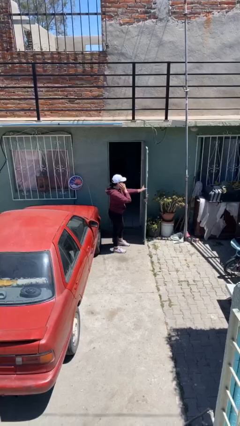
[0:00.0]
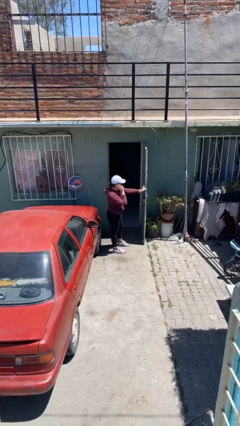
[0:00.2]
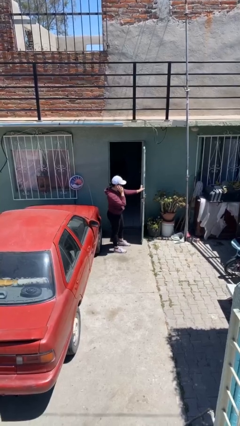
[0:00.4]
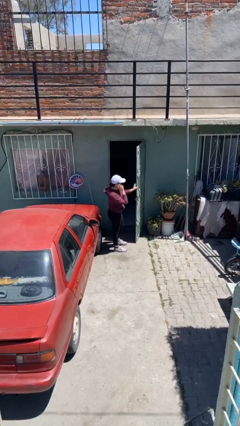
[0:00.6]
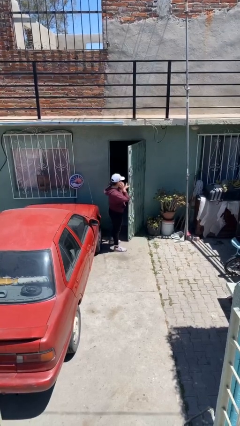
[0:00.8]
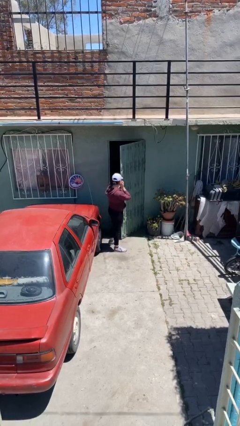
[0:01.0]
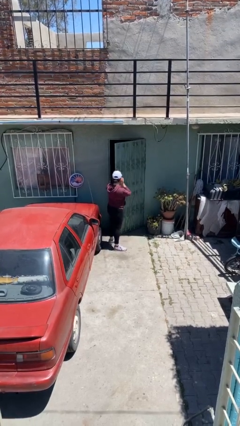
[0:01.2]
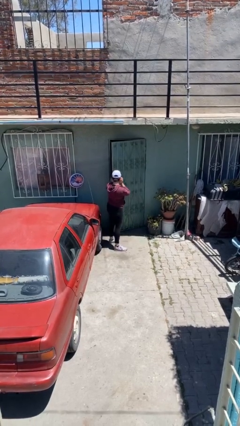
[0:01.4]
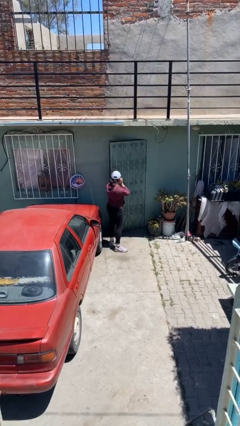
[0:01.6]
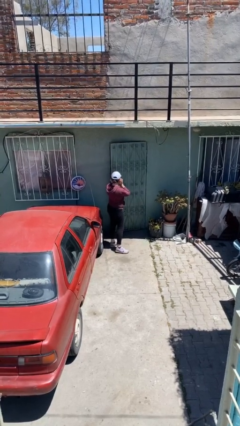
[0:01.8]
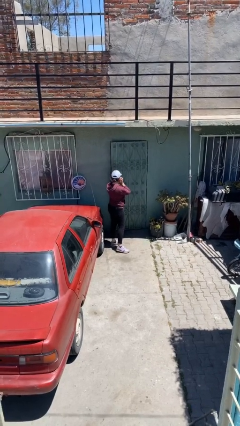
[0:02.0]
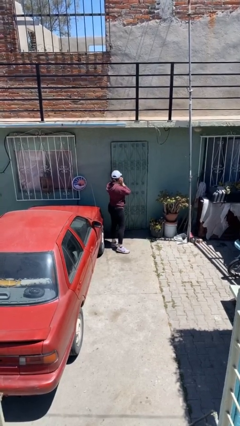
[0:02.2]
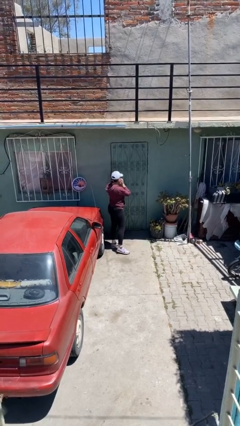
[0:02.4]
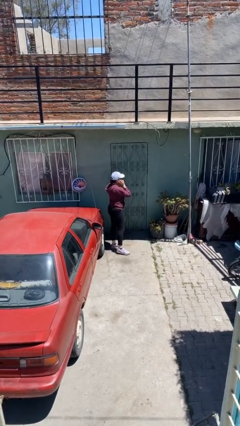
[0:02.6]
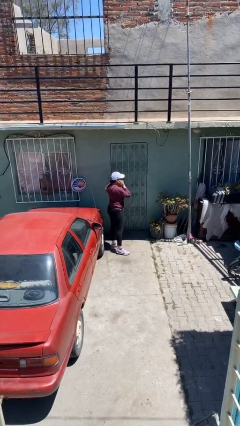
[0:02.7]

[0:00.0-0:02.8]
person closes facility door

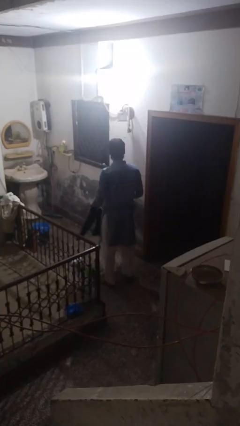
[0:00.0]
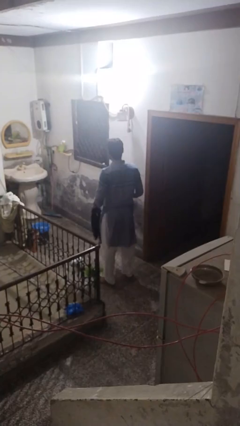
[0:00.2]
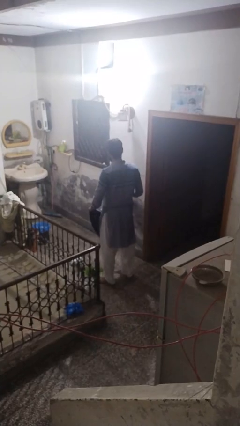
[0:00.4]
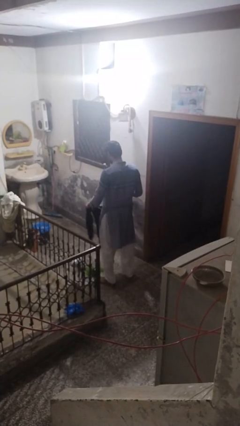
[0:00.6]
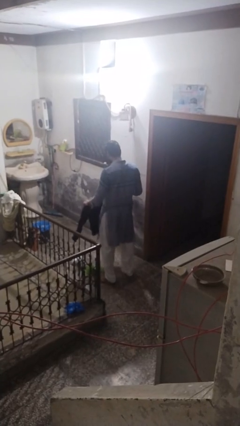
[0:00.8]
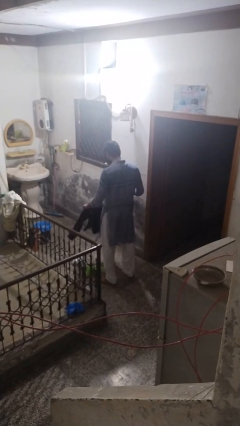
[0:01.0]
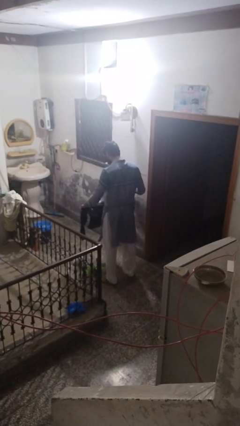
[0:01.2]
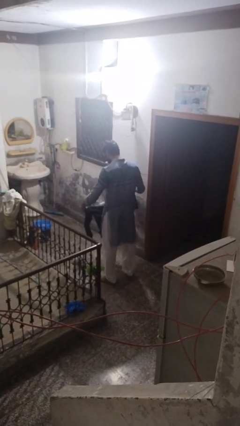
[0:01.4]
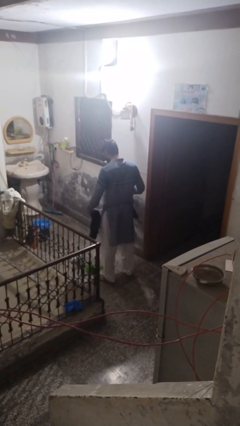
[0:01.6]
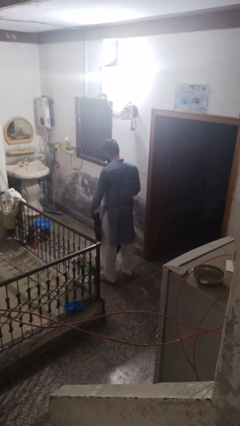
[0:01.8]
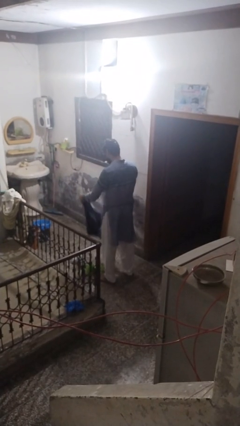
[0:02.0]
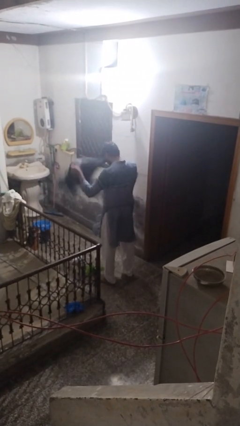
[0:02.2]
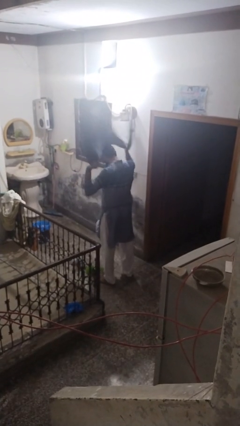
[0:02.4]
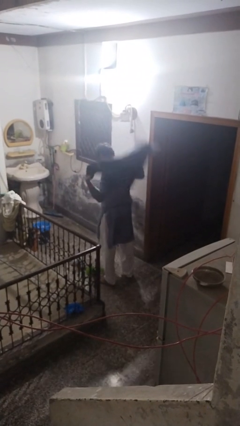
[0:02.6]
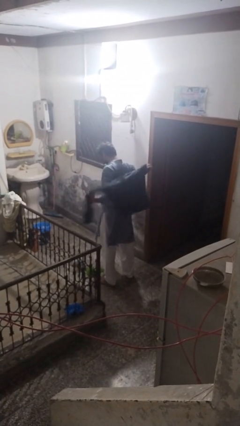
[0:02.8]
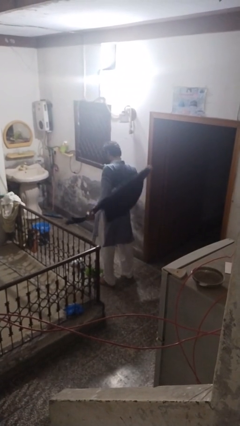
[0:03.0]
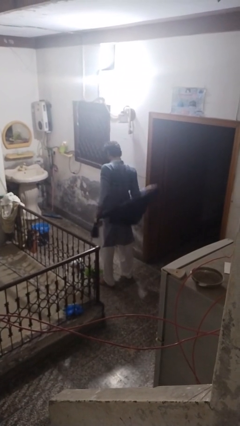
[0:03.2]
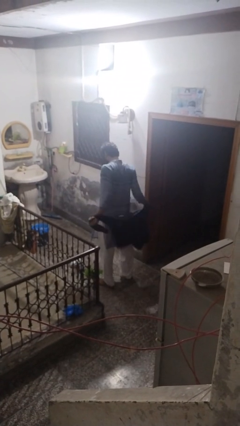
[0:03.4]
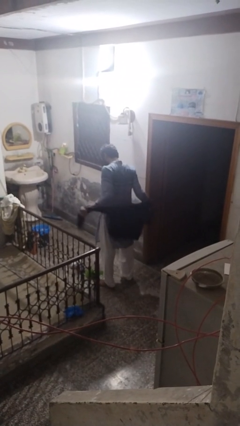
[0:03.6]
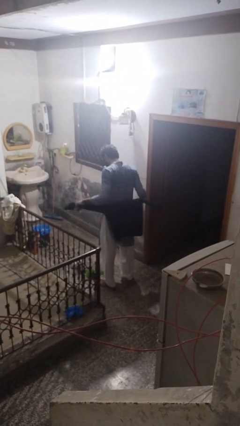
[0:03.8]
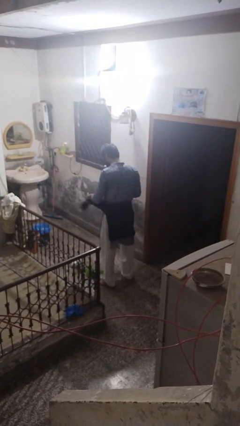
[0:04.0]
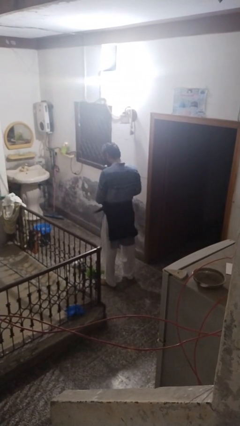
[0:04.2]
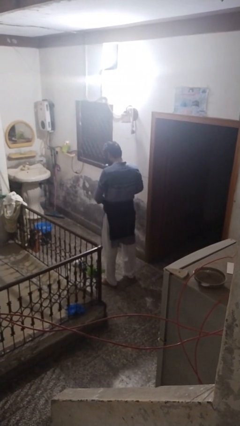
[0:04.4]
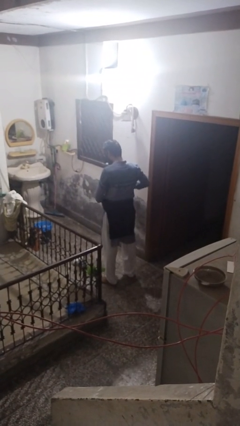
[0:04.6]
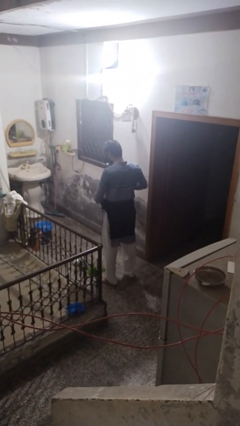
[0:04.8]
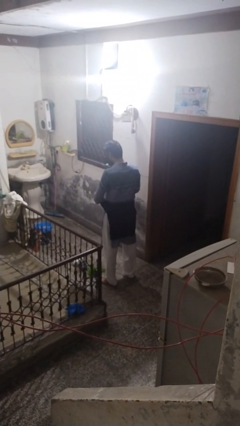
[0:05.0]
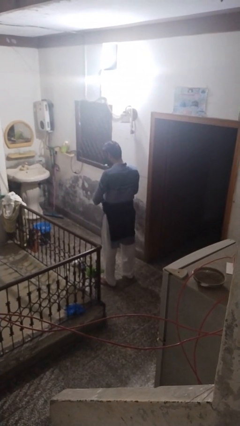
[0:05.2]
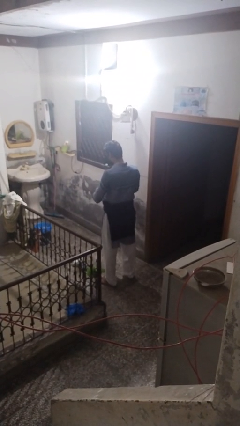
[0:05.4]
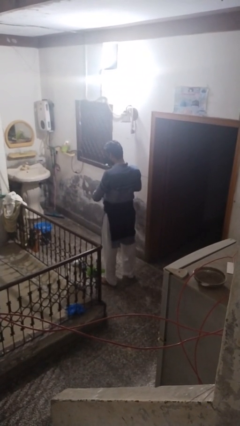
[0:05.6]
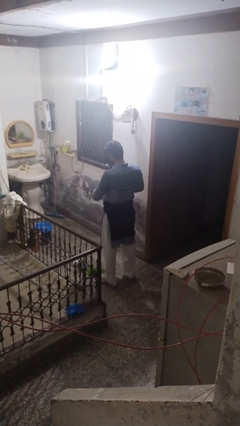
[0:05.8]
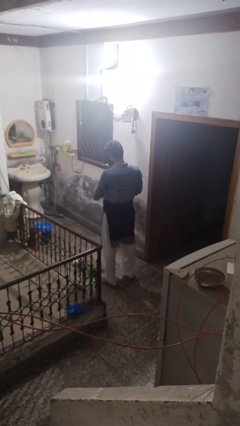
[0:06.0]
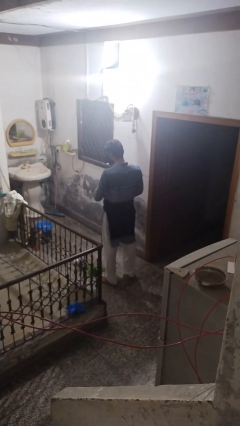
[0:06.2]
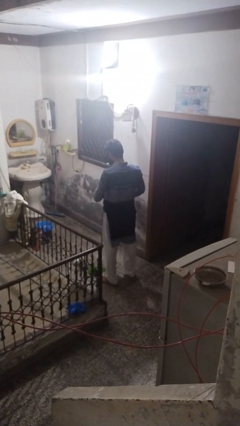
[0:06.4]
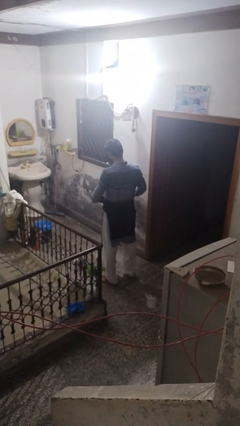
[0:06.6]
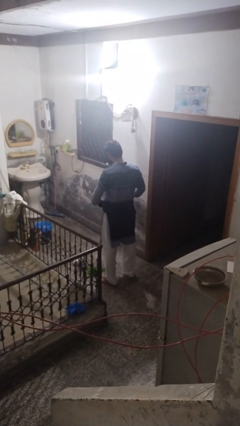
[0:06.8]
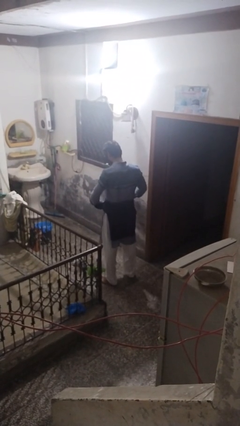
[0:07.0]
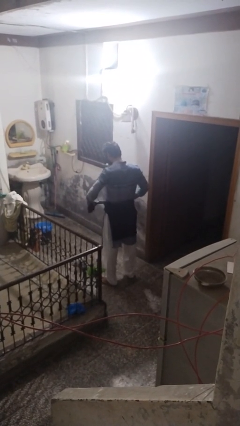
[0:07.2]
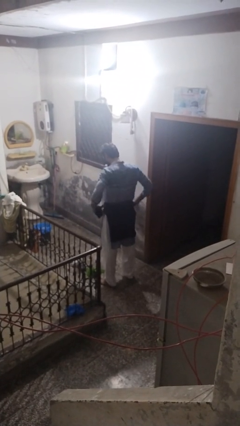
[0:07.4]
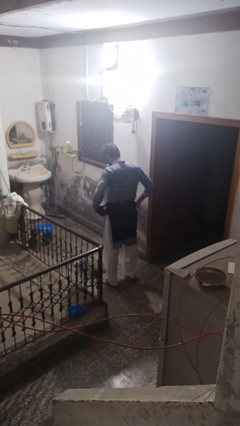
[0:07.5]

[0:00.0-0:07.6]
person ties jacket around waist

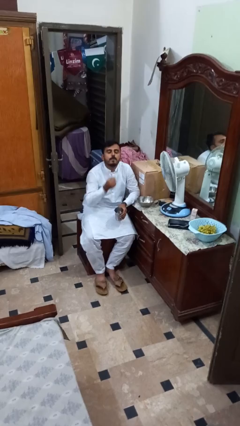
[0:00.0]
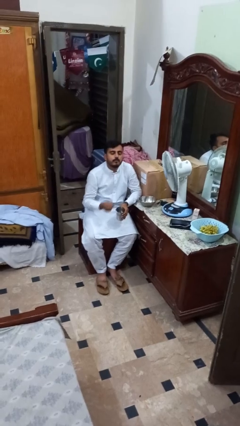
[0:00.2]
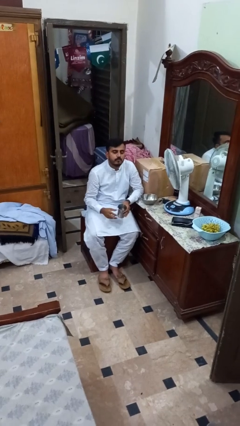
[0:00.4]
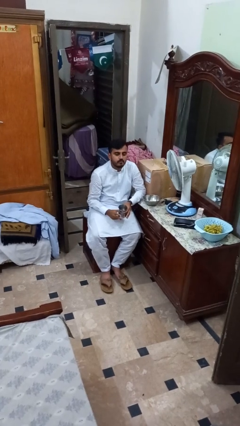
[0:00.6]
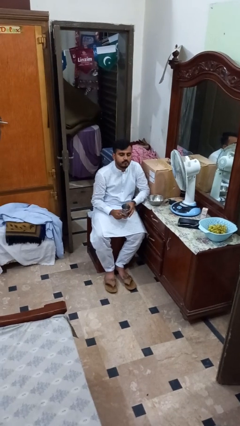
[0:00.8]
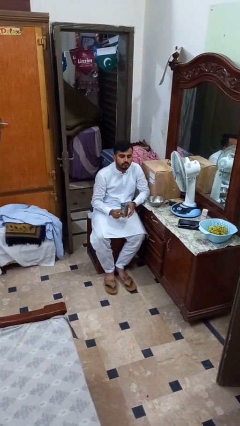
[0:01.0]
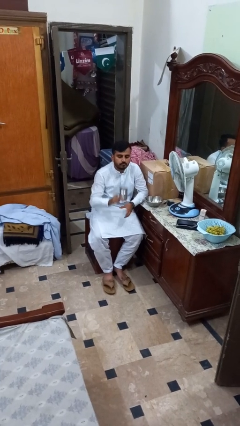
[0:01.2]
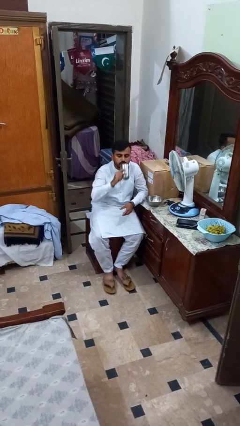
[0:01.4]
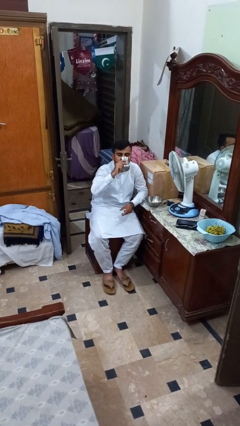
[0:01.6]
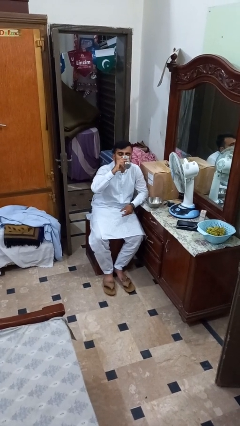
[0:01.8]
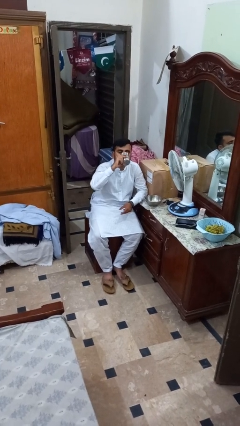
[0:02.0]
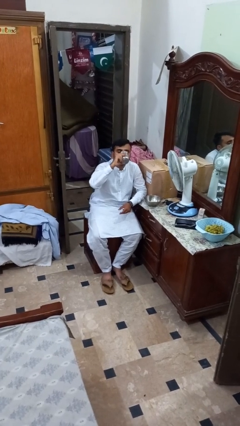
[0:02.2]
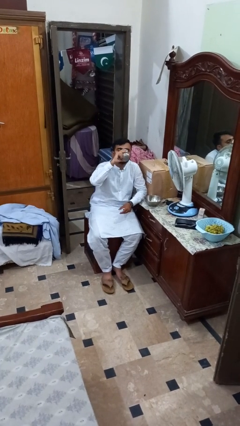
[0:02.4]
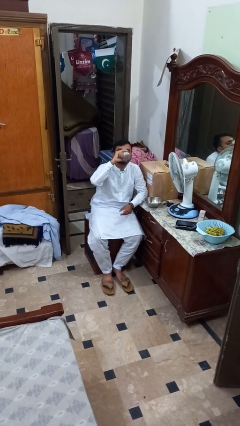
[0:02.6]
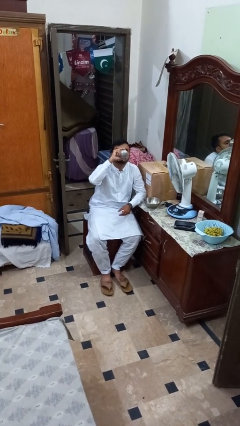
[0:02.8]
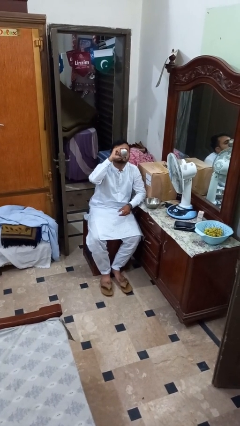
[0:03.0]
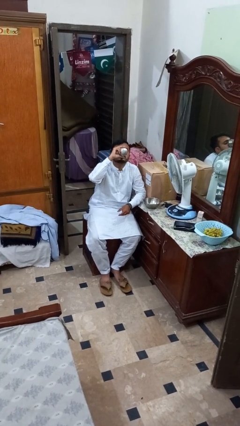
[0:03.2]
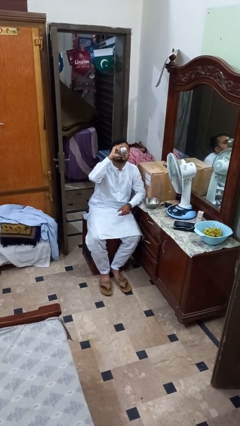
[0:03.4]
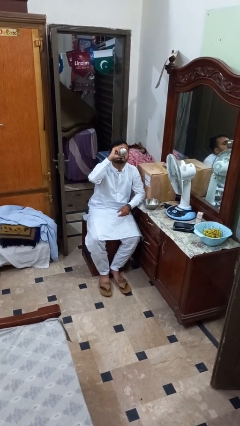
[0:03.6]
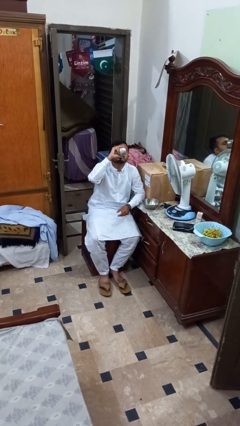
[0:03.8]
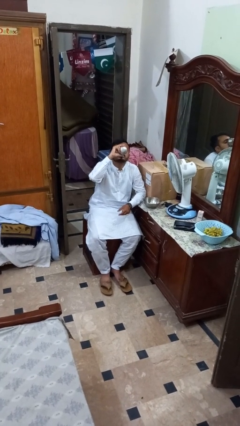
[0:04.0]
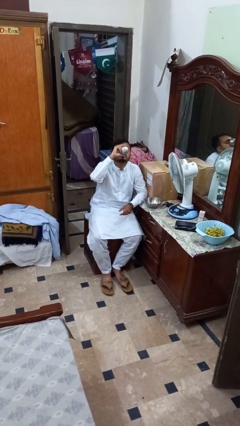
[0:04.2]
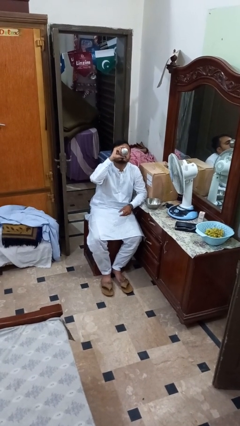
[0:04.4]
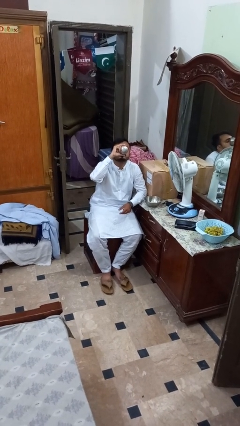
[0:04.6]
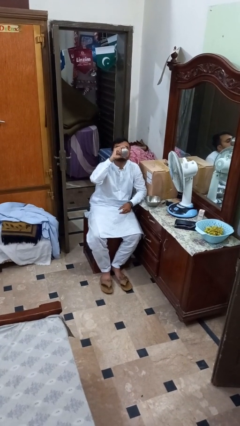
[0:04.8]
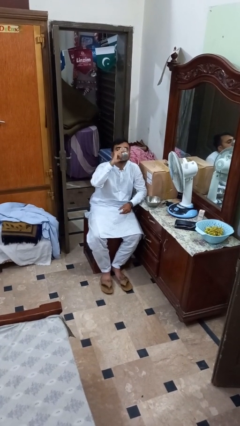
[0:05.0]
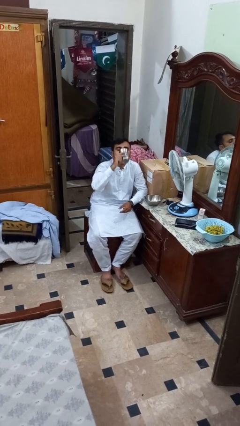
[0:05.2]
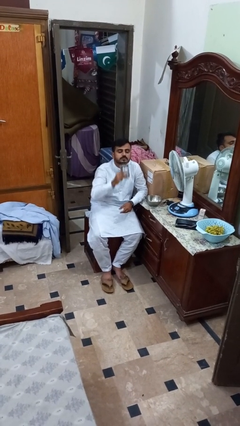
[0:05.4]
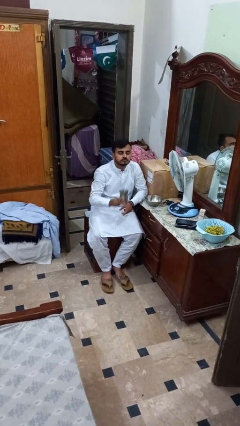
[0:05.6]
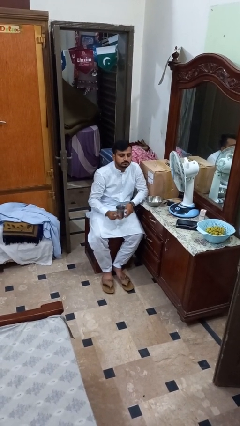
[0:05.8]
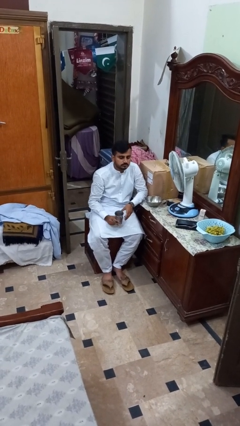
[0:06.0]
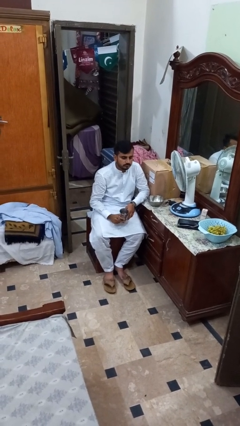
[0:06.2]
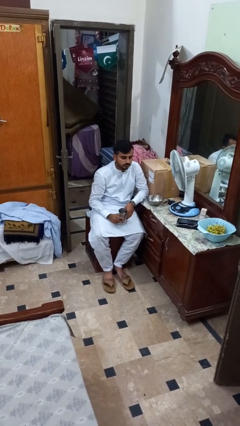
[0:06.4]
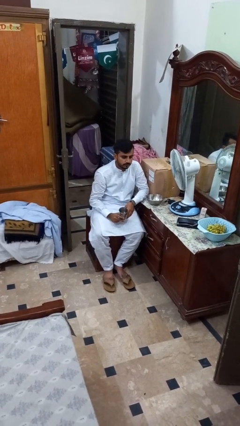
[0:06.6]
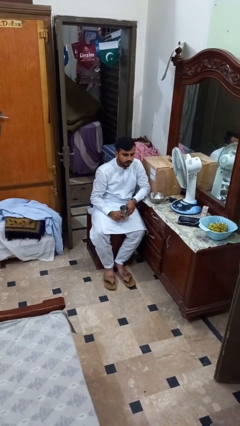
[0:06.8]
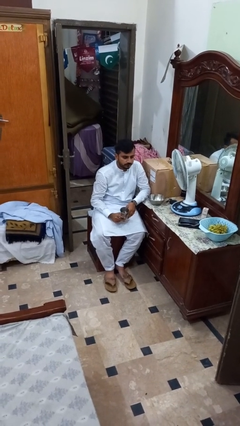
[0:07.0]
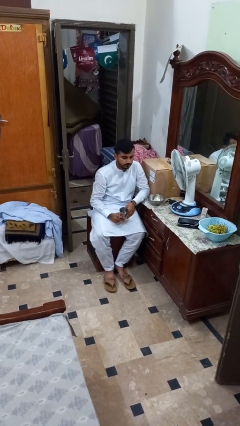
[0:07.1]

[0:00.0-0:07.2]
person drinks from cup

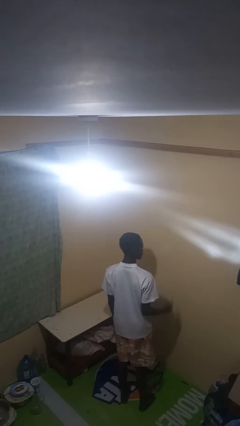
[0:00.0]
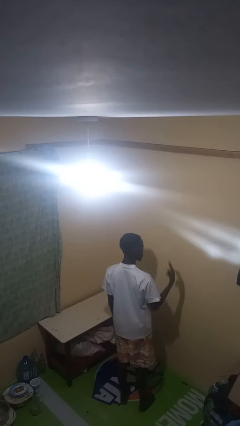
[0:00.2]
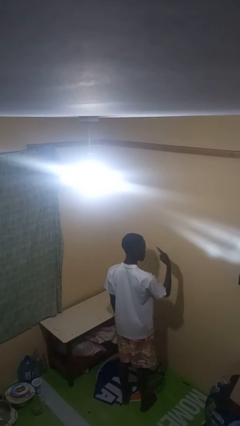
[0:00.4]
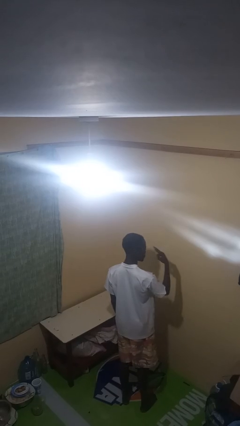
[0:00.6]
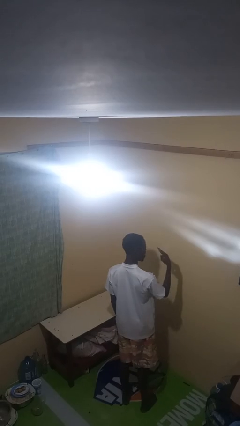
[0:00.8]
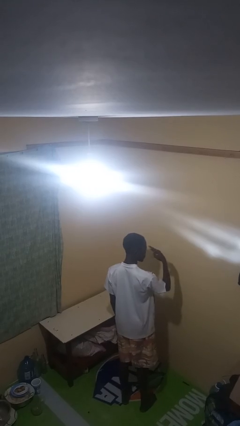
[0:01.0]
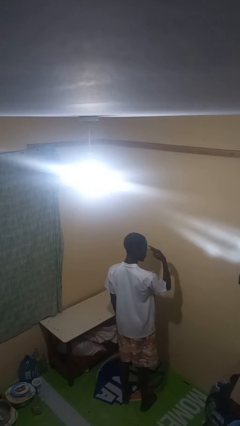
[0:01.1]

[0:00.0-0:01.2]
person gestures watch closely
